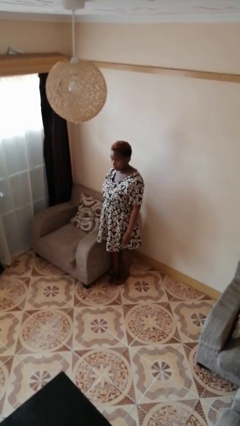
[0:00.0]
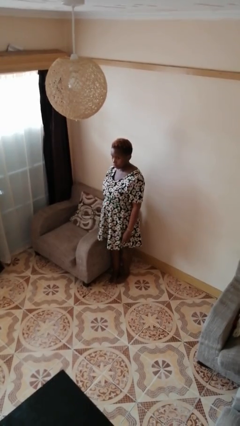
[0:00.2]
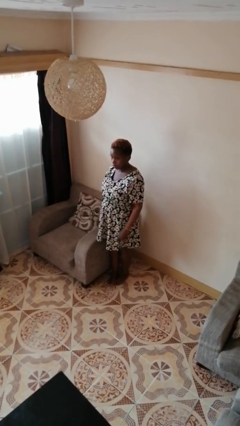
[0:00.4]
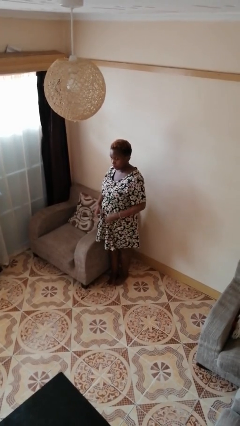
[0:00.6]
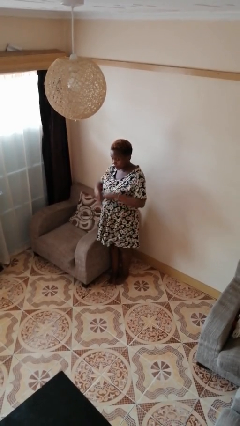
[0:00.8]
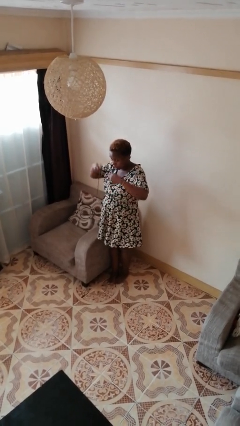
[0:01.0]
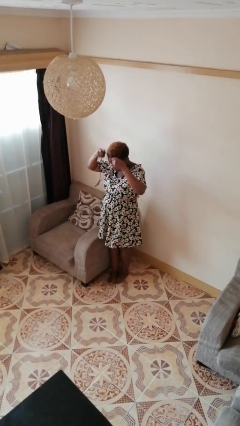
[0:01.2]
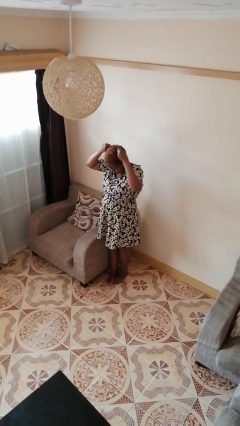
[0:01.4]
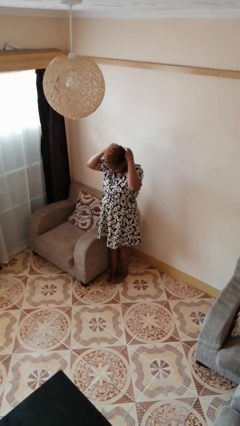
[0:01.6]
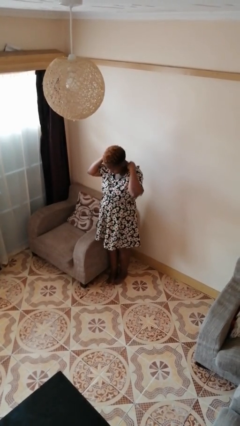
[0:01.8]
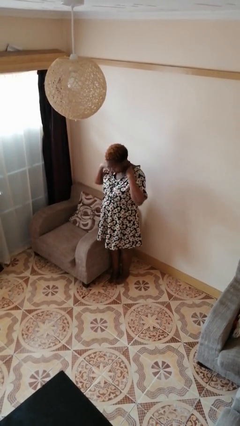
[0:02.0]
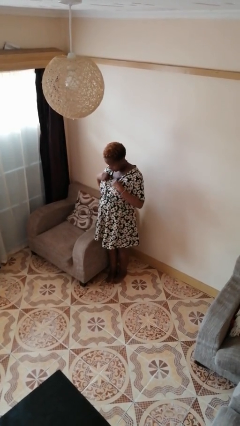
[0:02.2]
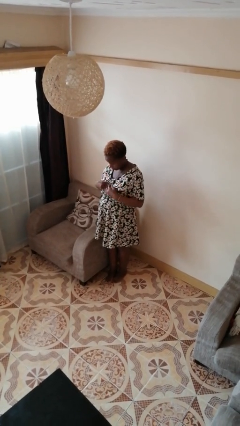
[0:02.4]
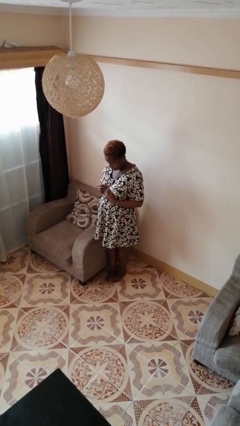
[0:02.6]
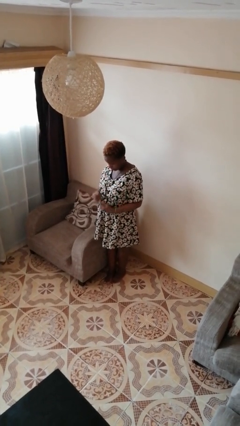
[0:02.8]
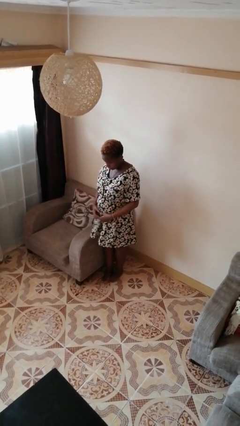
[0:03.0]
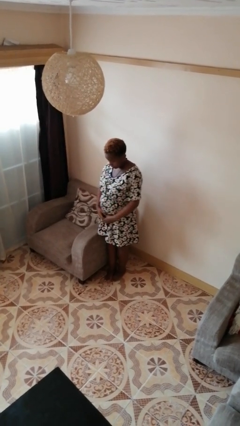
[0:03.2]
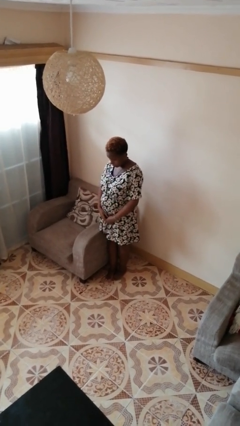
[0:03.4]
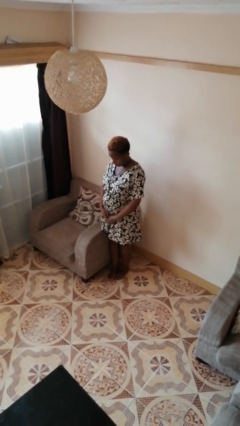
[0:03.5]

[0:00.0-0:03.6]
person puts on necklace

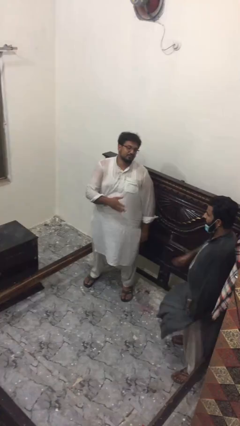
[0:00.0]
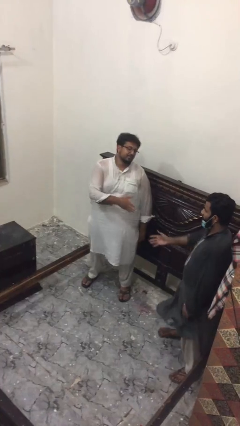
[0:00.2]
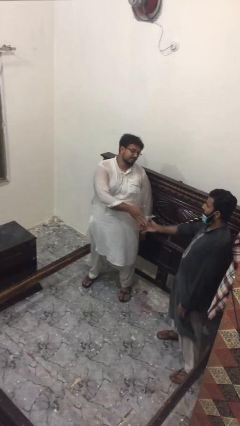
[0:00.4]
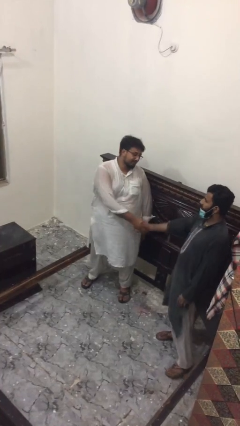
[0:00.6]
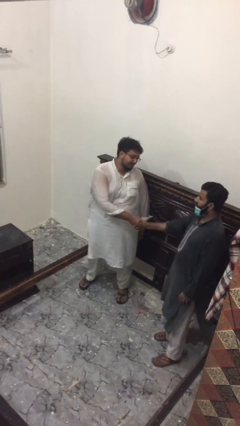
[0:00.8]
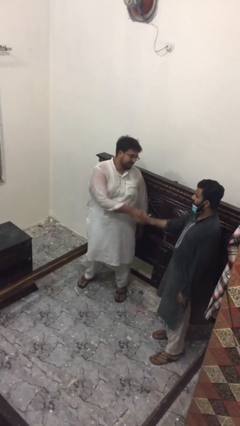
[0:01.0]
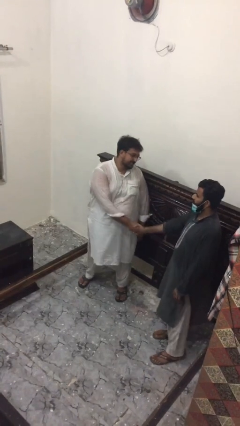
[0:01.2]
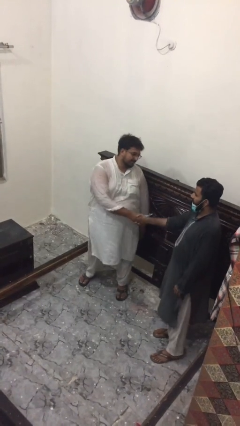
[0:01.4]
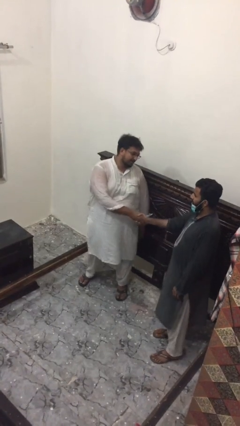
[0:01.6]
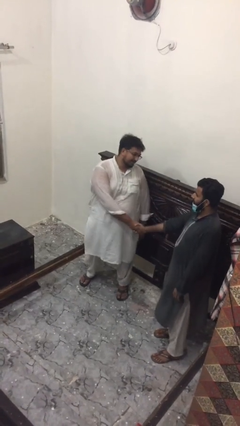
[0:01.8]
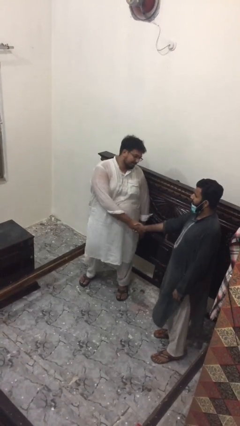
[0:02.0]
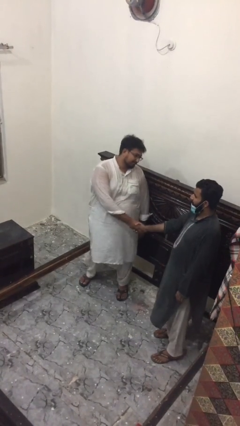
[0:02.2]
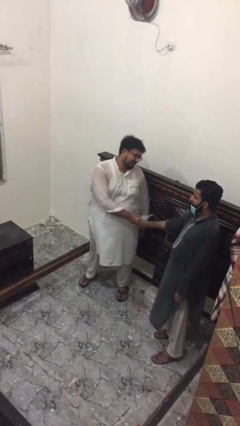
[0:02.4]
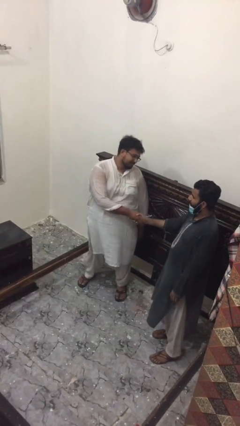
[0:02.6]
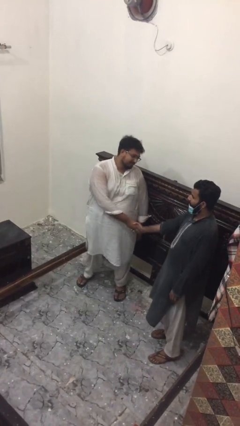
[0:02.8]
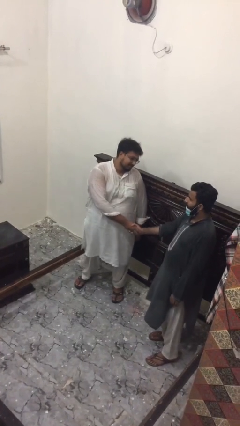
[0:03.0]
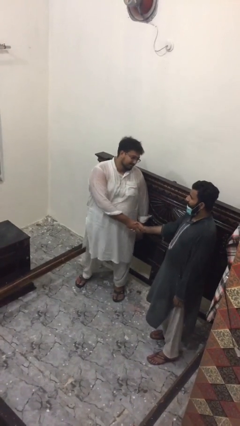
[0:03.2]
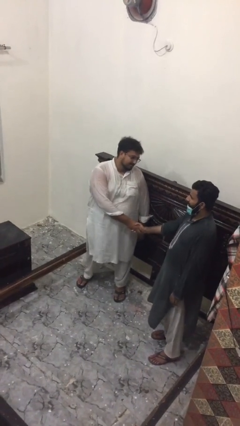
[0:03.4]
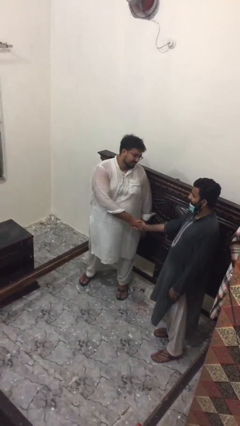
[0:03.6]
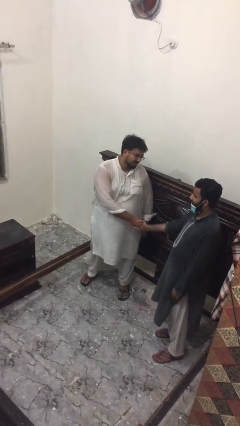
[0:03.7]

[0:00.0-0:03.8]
person shakes hand

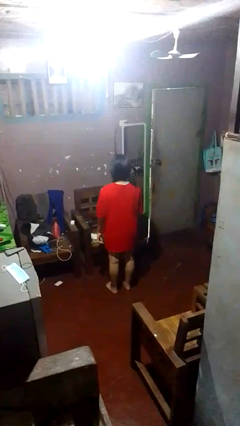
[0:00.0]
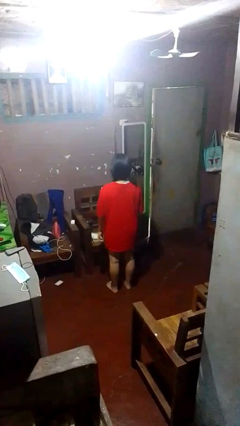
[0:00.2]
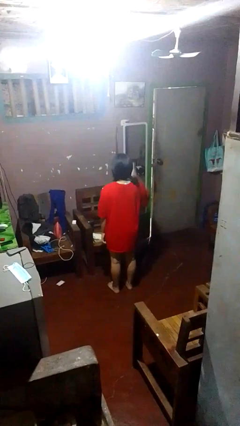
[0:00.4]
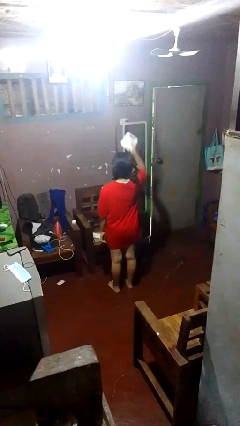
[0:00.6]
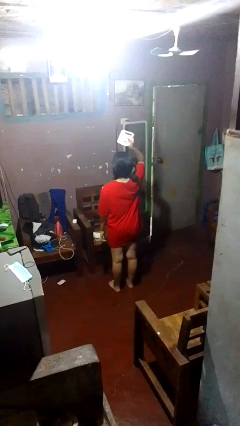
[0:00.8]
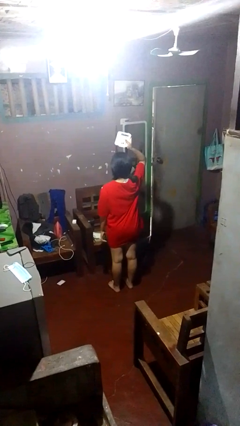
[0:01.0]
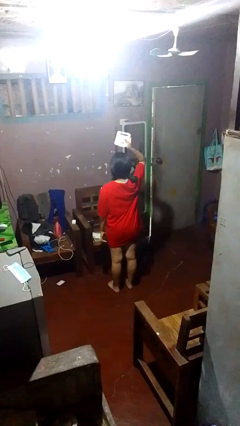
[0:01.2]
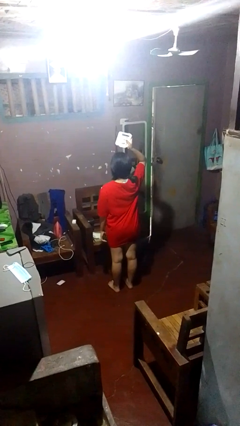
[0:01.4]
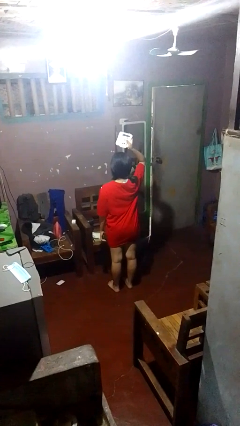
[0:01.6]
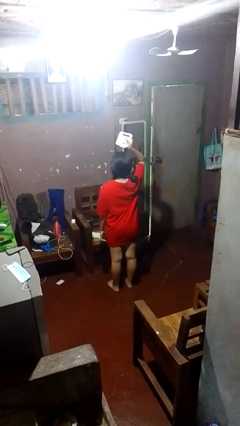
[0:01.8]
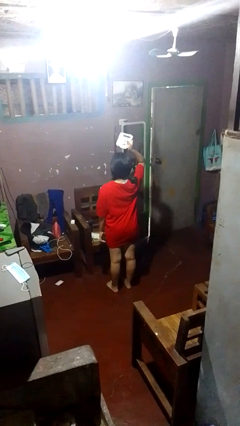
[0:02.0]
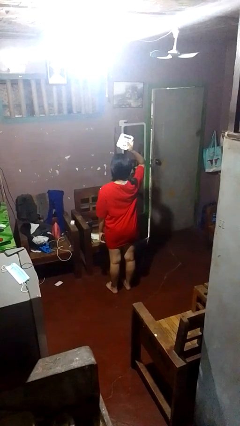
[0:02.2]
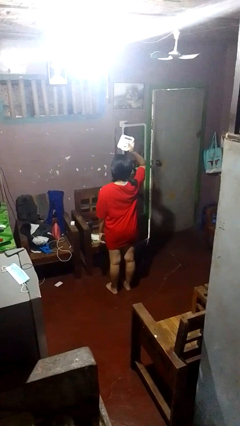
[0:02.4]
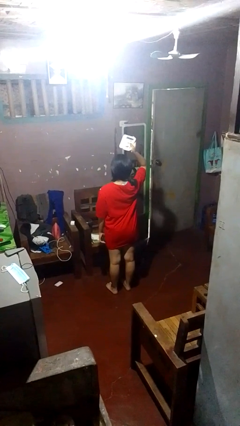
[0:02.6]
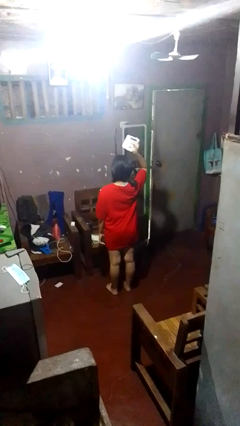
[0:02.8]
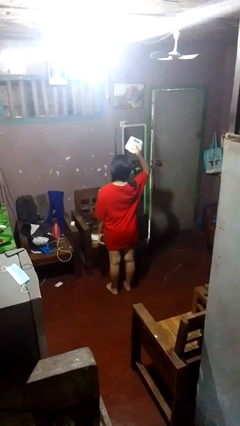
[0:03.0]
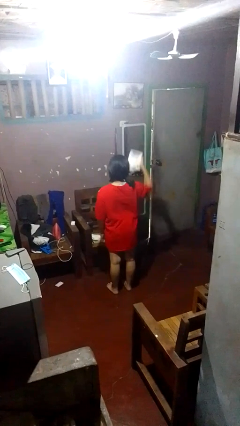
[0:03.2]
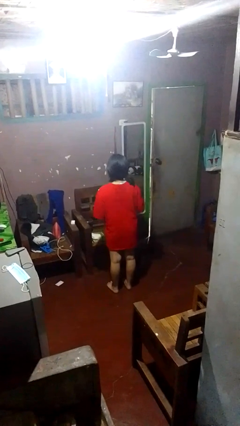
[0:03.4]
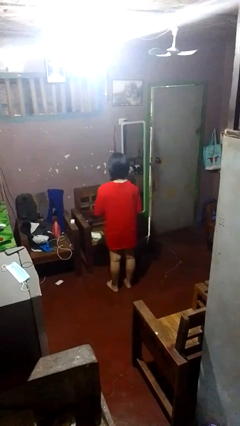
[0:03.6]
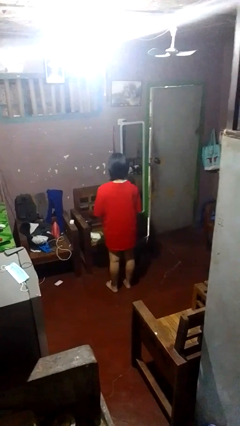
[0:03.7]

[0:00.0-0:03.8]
person holds object above head

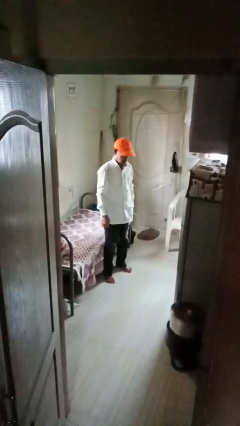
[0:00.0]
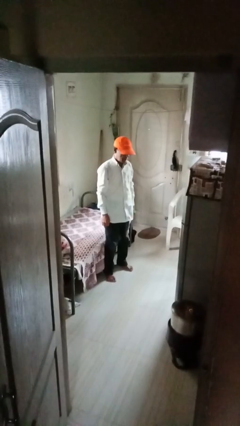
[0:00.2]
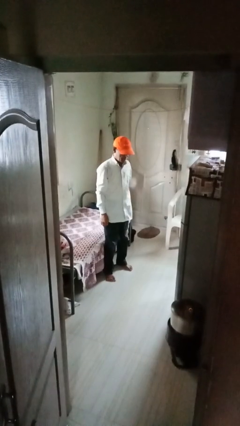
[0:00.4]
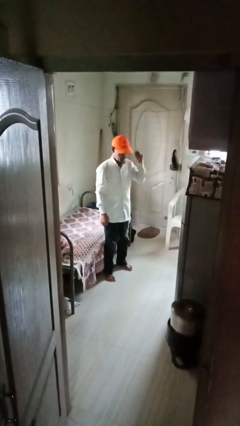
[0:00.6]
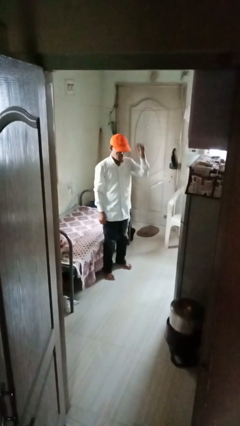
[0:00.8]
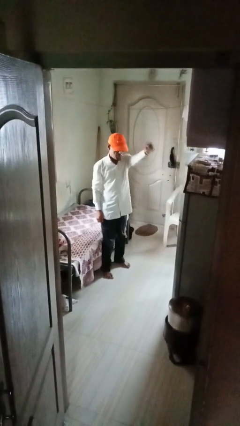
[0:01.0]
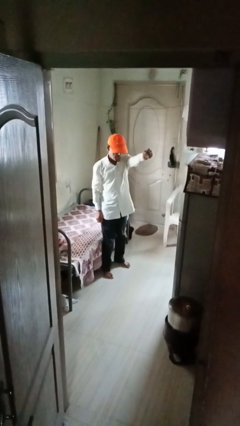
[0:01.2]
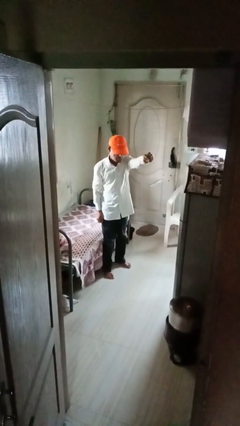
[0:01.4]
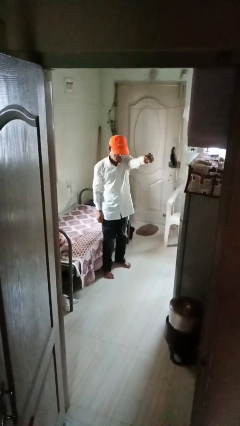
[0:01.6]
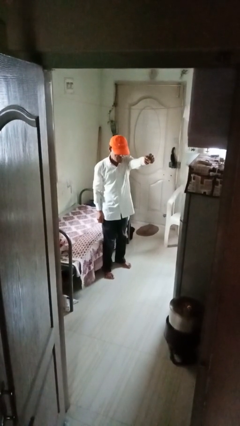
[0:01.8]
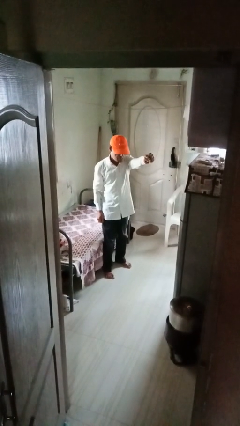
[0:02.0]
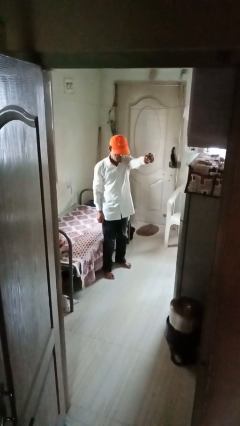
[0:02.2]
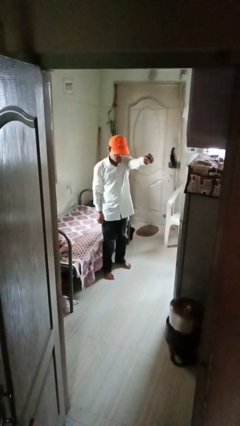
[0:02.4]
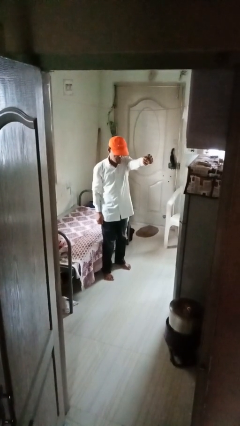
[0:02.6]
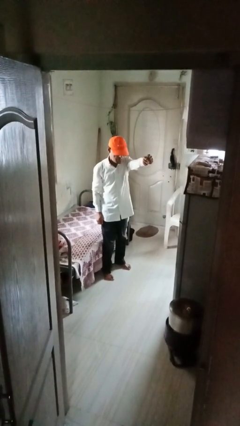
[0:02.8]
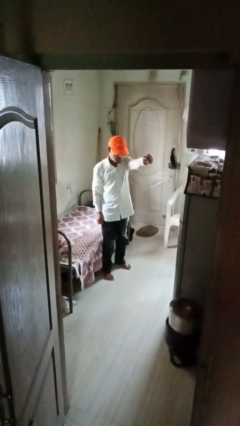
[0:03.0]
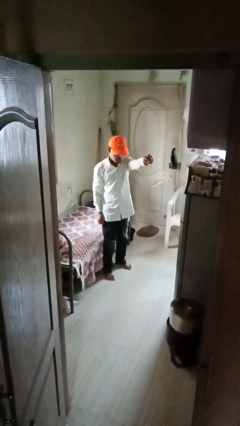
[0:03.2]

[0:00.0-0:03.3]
person punches

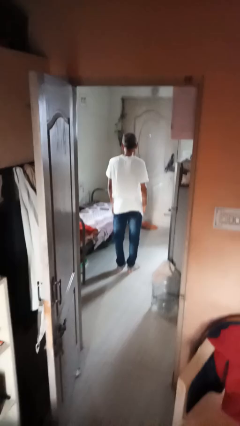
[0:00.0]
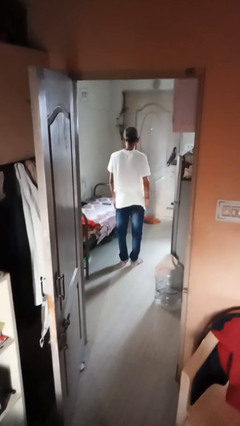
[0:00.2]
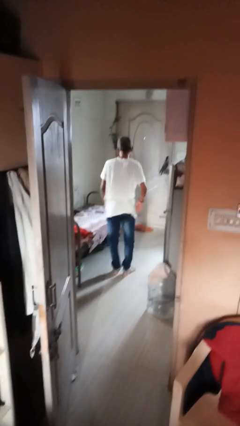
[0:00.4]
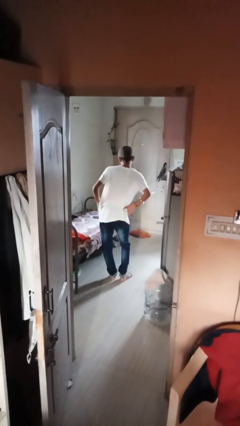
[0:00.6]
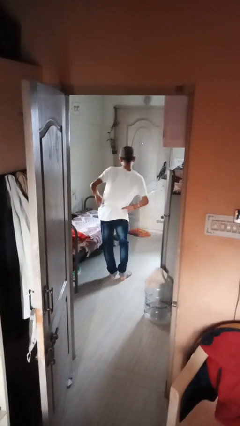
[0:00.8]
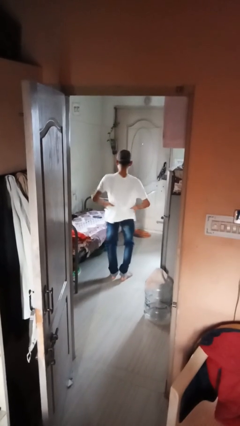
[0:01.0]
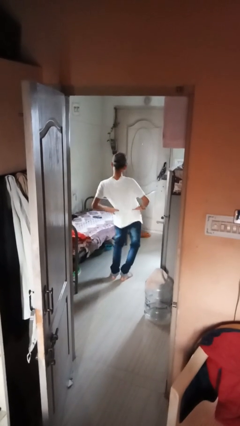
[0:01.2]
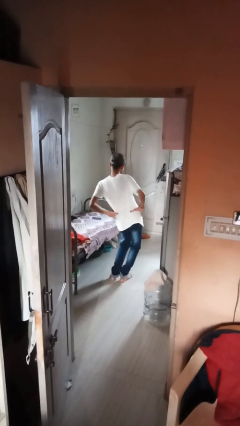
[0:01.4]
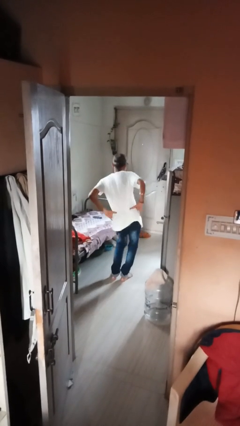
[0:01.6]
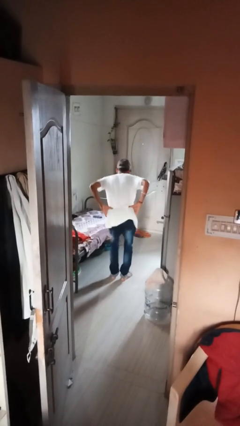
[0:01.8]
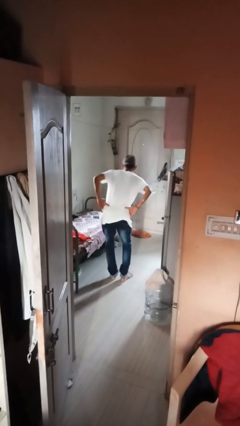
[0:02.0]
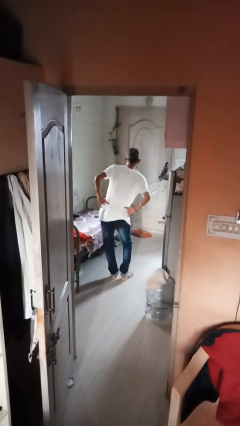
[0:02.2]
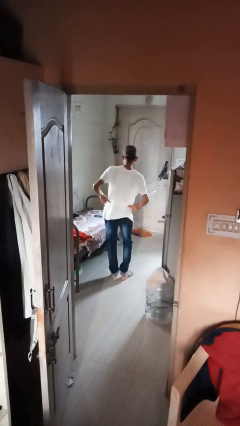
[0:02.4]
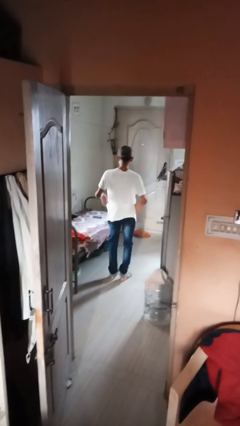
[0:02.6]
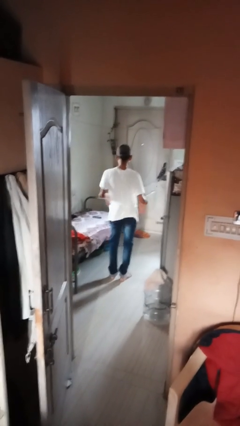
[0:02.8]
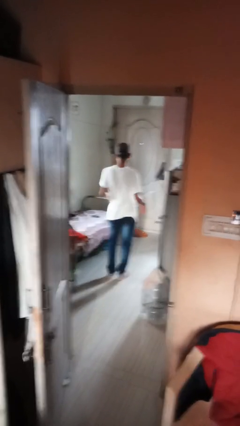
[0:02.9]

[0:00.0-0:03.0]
person wiggles hips

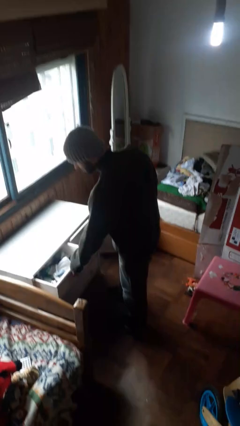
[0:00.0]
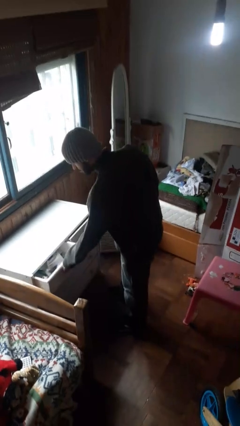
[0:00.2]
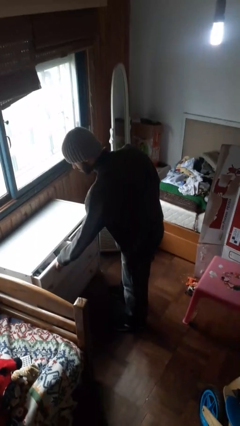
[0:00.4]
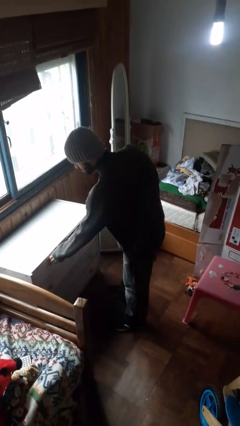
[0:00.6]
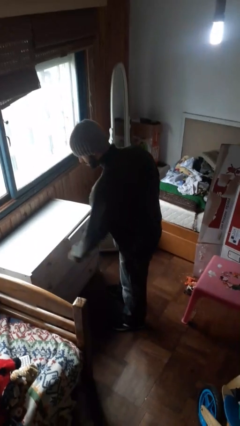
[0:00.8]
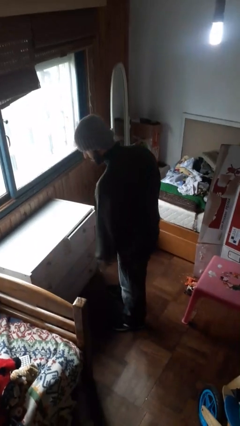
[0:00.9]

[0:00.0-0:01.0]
person closes dresser drawer
